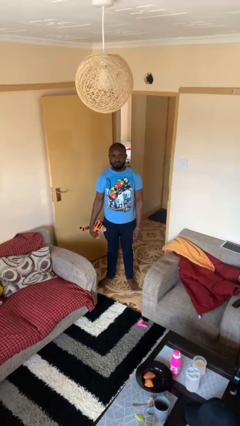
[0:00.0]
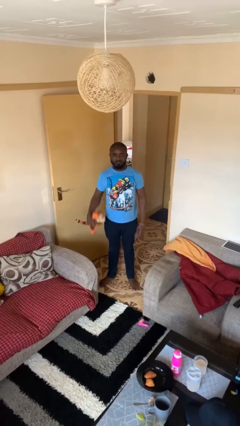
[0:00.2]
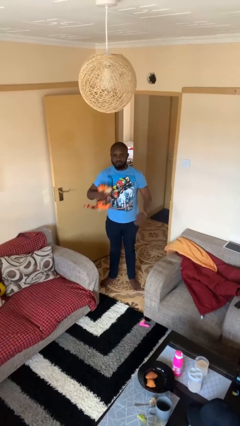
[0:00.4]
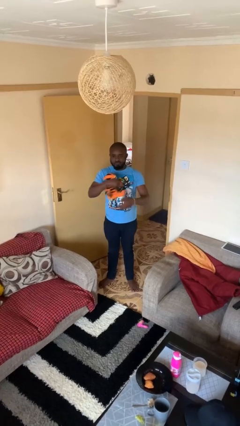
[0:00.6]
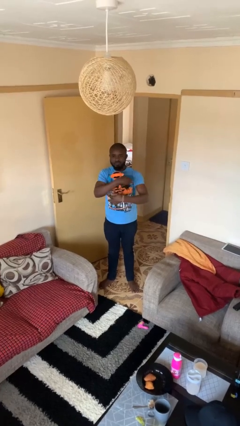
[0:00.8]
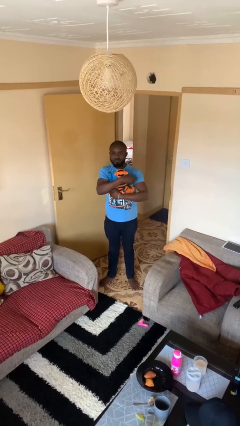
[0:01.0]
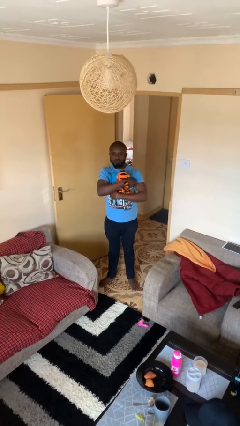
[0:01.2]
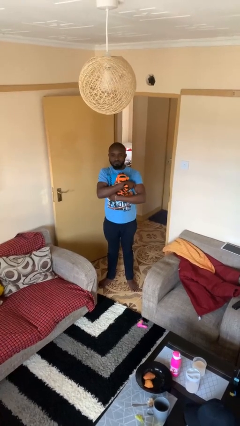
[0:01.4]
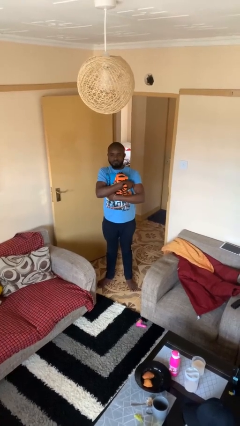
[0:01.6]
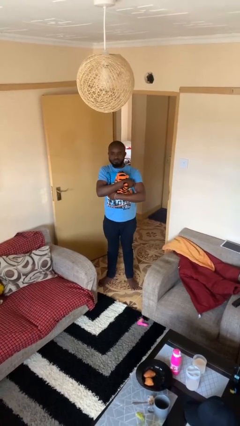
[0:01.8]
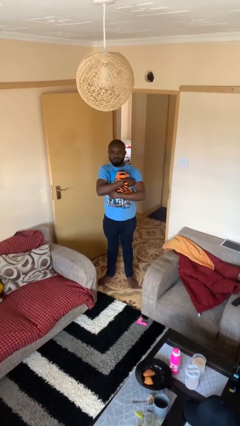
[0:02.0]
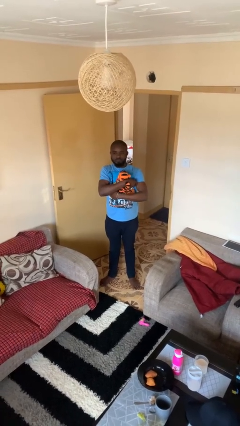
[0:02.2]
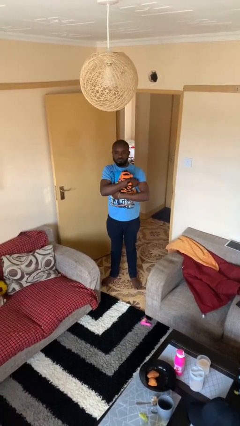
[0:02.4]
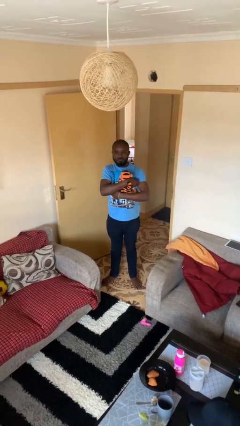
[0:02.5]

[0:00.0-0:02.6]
person hugs stuffed animal

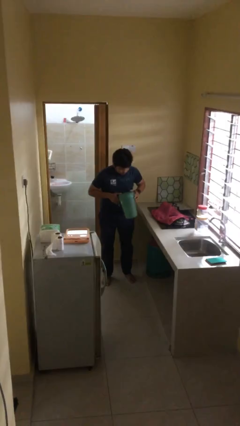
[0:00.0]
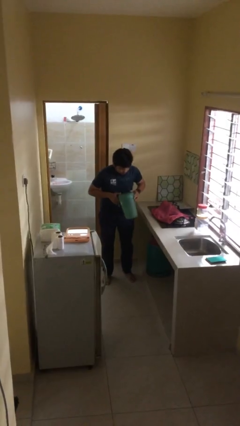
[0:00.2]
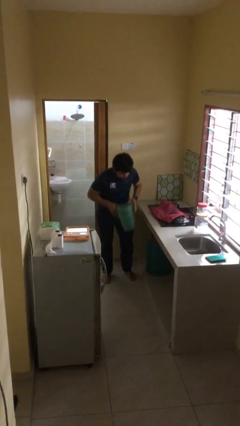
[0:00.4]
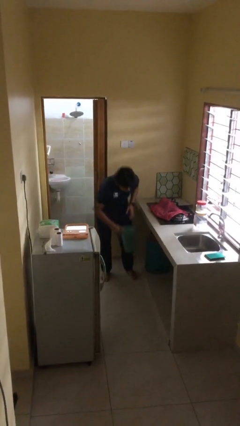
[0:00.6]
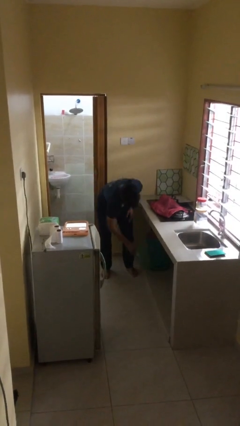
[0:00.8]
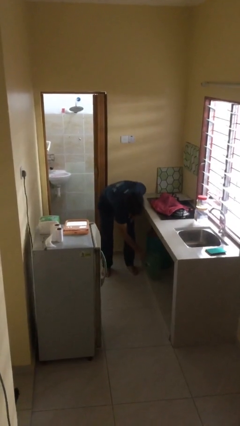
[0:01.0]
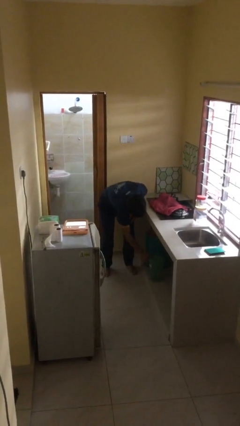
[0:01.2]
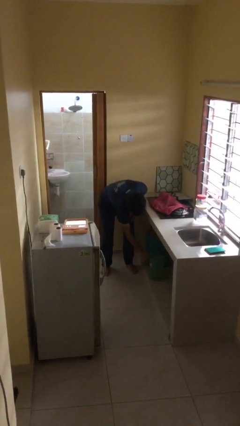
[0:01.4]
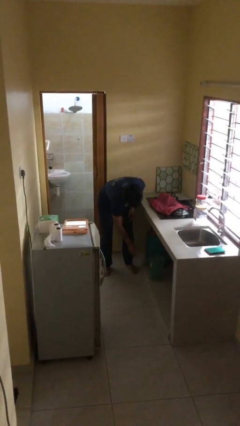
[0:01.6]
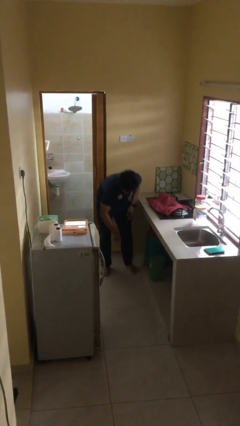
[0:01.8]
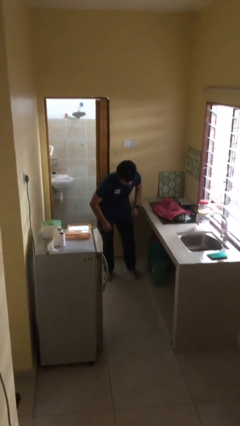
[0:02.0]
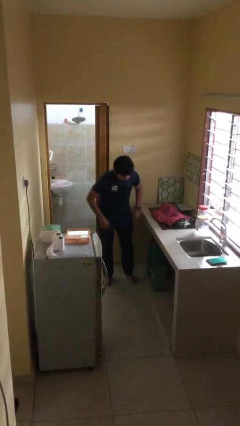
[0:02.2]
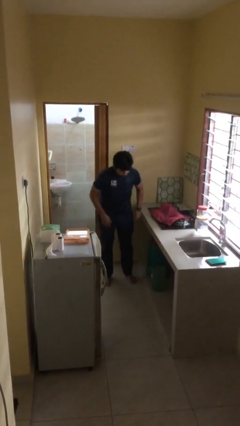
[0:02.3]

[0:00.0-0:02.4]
person puts down object into cabinet

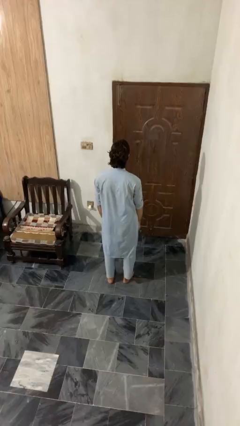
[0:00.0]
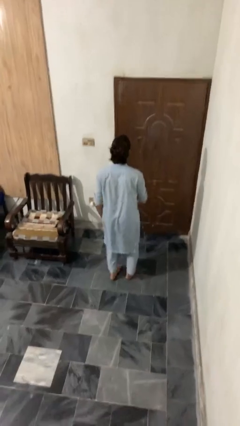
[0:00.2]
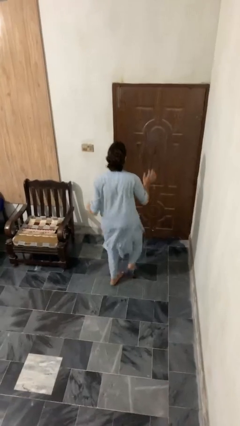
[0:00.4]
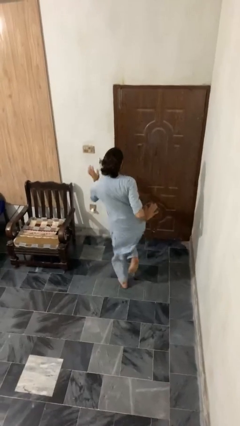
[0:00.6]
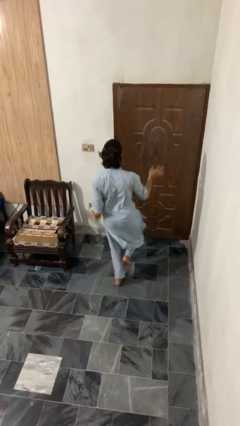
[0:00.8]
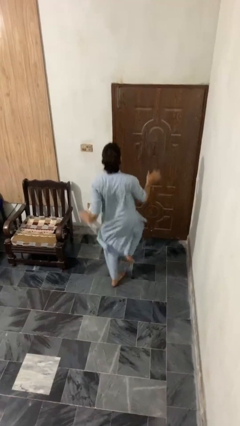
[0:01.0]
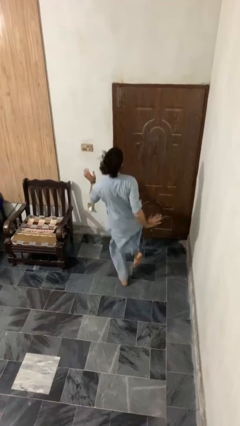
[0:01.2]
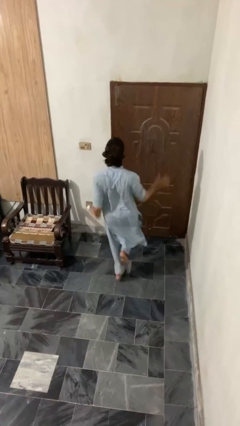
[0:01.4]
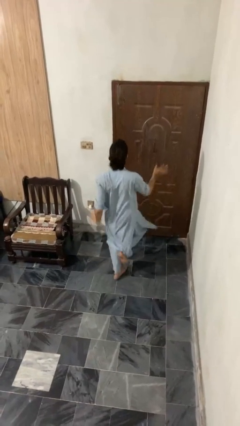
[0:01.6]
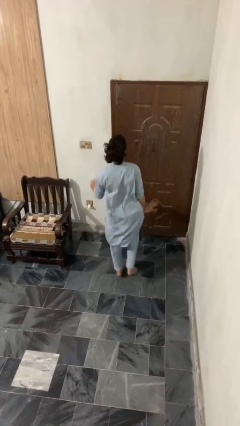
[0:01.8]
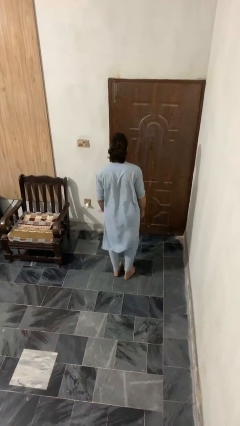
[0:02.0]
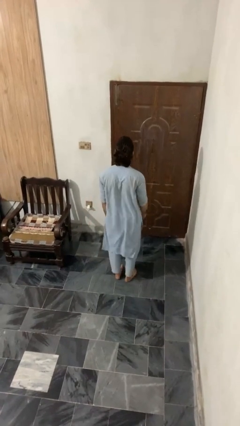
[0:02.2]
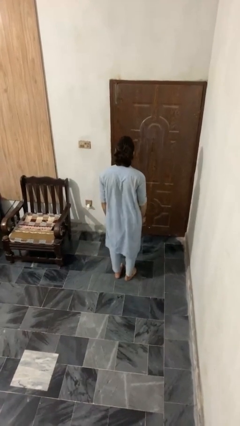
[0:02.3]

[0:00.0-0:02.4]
person dances in place

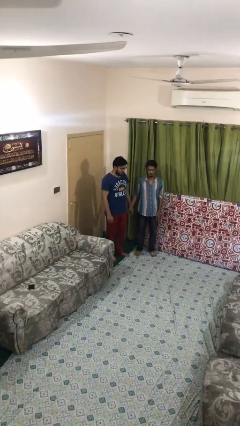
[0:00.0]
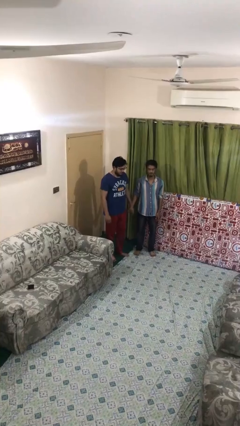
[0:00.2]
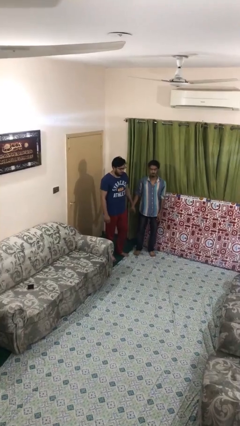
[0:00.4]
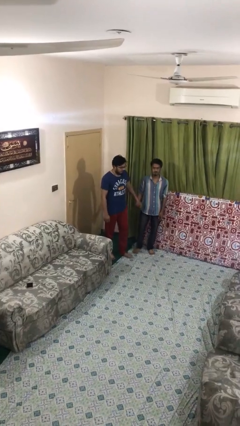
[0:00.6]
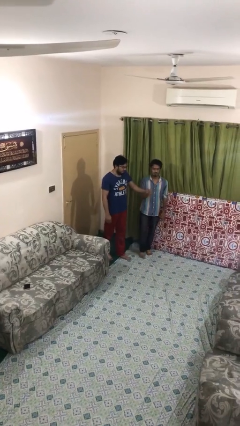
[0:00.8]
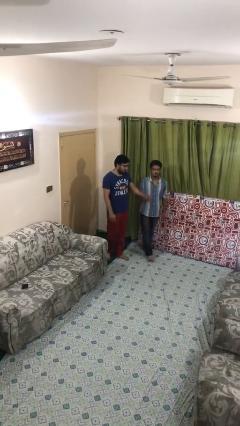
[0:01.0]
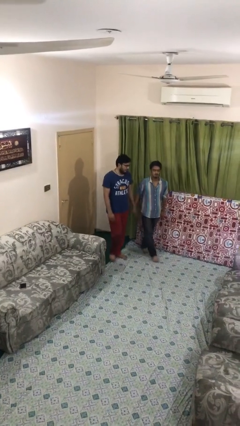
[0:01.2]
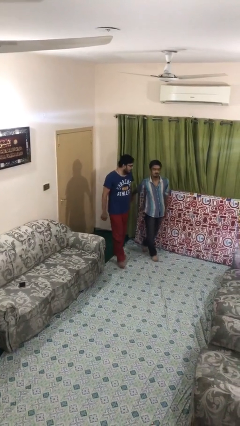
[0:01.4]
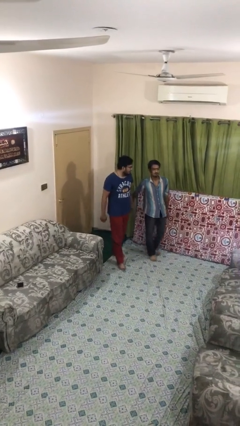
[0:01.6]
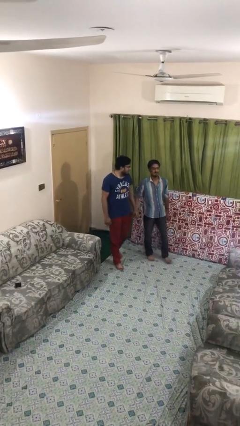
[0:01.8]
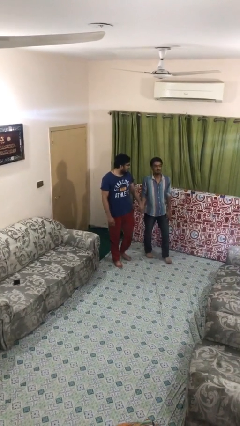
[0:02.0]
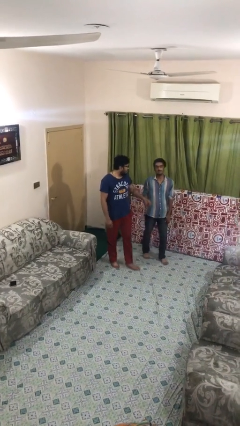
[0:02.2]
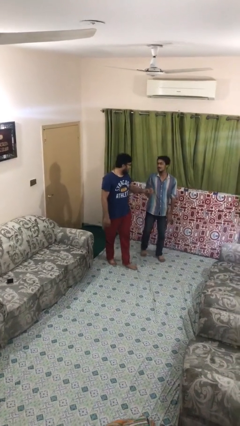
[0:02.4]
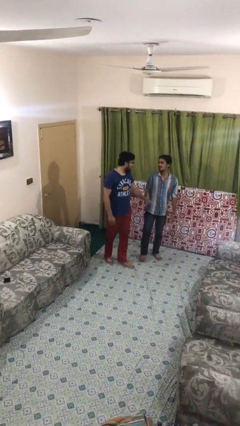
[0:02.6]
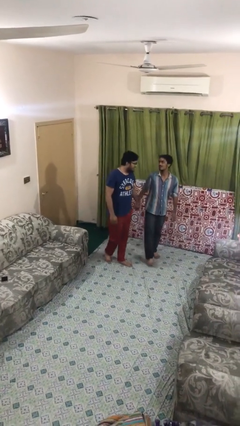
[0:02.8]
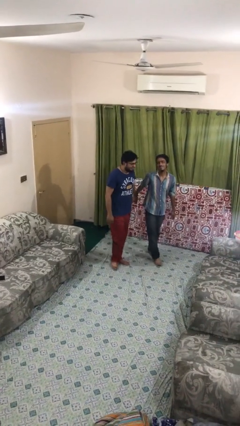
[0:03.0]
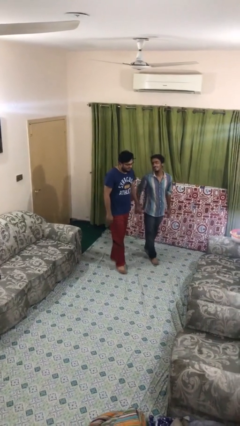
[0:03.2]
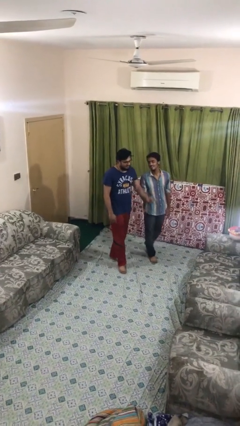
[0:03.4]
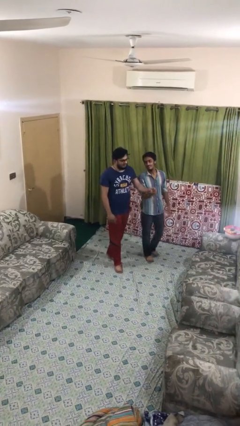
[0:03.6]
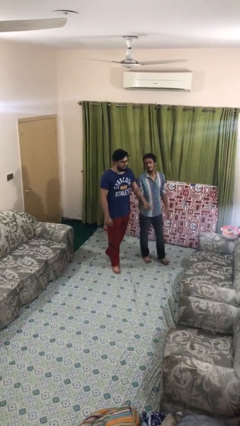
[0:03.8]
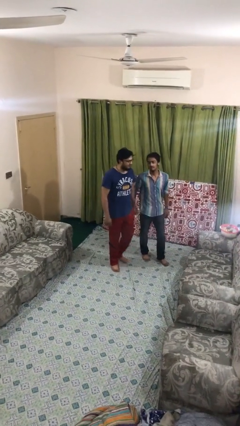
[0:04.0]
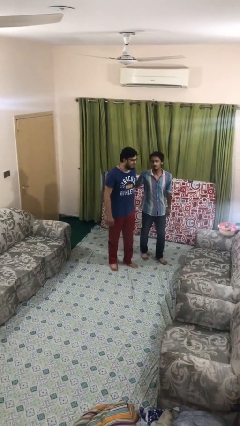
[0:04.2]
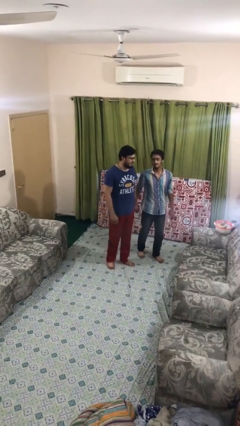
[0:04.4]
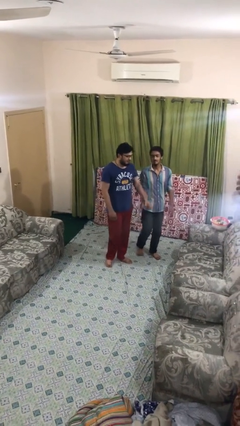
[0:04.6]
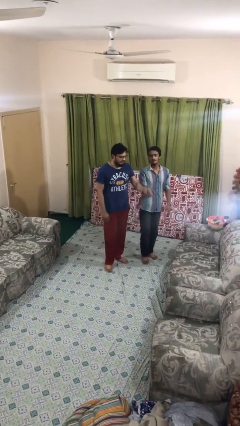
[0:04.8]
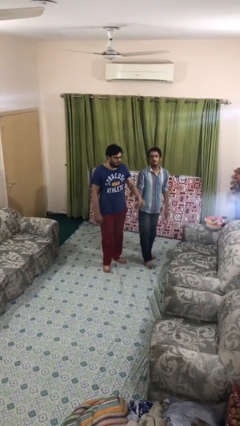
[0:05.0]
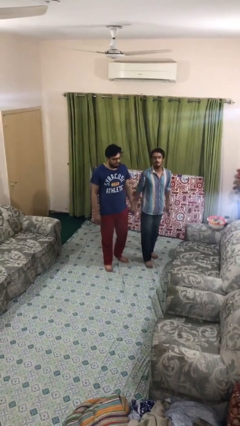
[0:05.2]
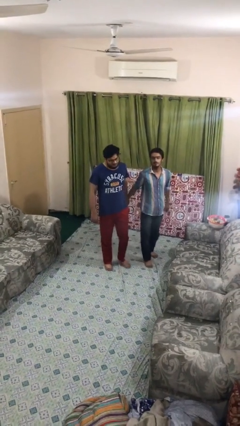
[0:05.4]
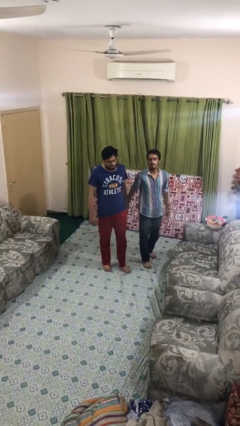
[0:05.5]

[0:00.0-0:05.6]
person holds hand

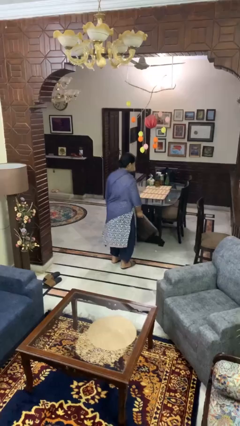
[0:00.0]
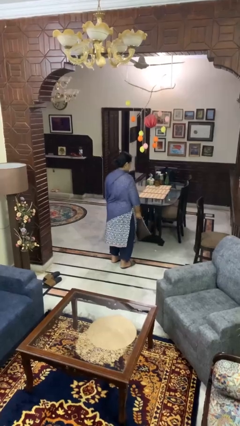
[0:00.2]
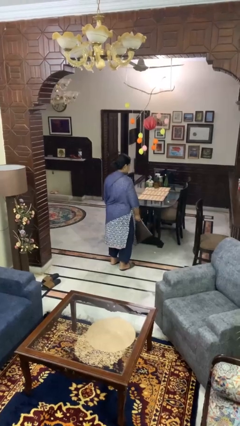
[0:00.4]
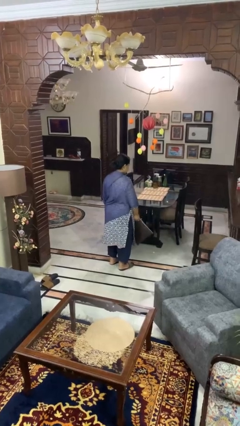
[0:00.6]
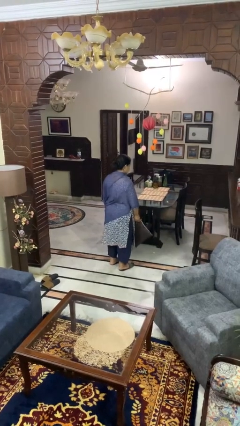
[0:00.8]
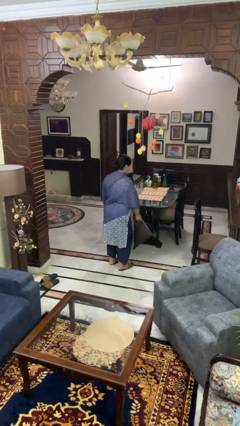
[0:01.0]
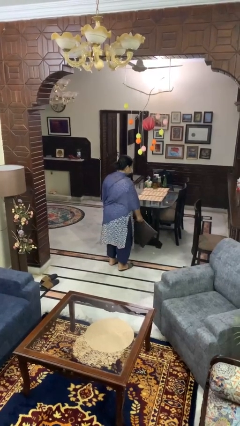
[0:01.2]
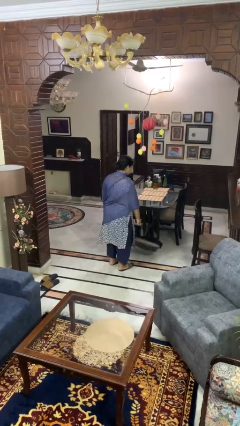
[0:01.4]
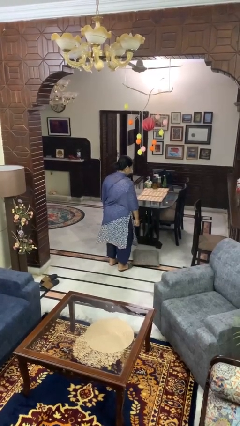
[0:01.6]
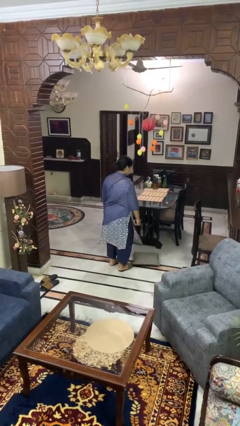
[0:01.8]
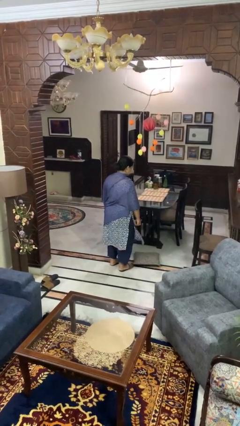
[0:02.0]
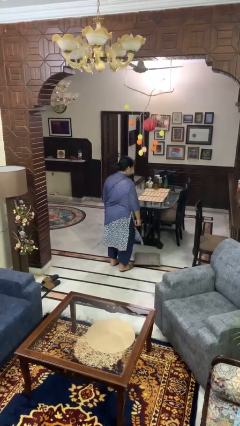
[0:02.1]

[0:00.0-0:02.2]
person throws object to ground

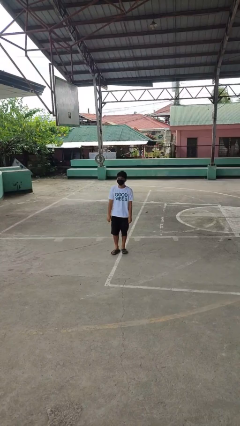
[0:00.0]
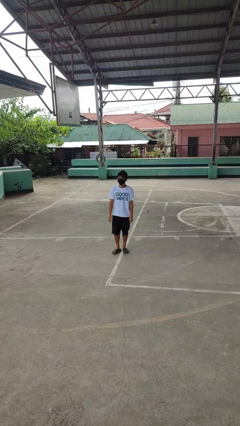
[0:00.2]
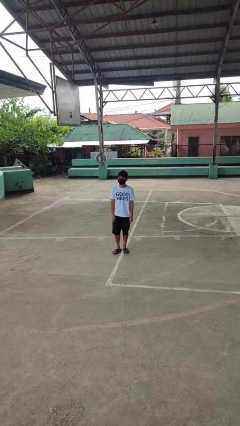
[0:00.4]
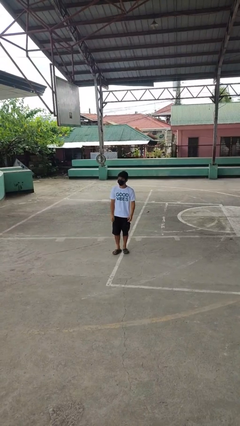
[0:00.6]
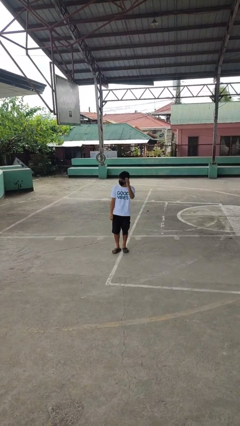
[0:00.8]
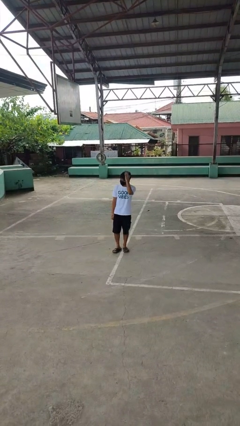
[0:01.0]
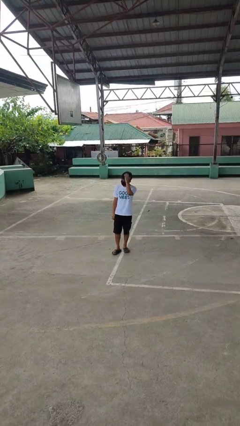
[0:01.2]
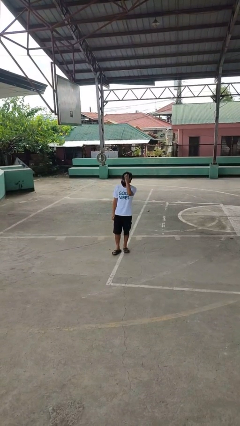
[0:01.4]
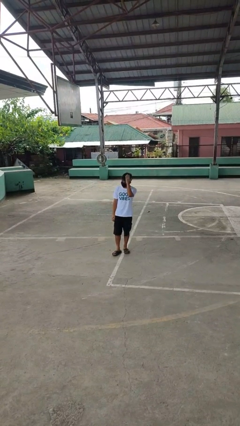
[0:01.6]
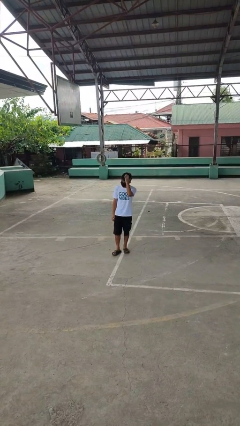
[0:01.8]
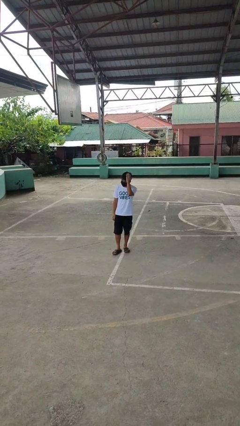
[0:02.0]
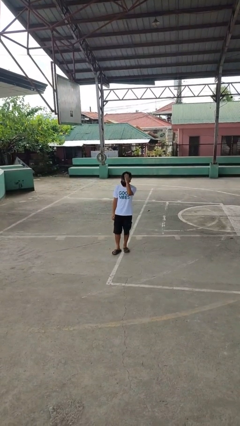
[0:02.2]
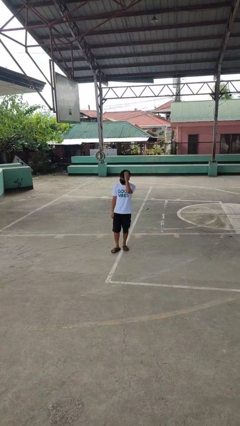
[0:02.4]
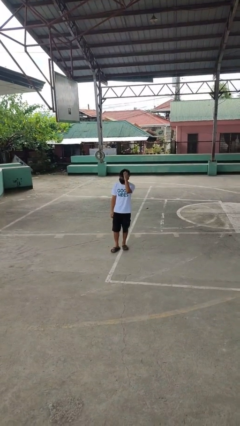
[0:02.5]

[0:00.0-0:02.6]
person pats head
